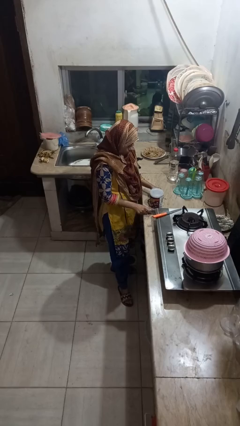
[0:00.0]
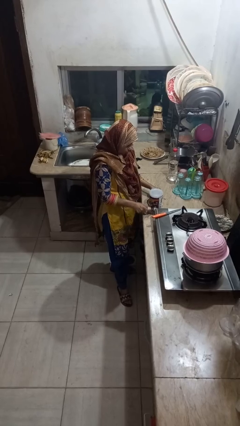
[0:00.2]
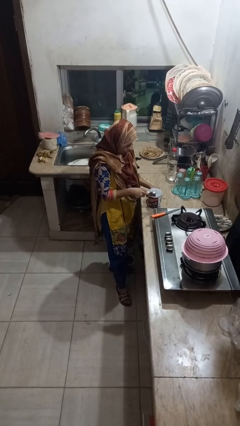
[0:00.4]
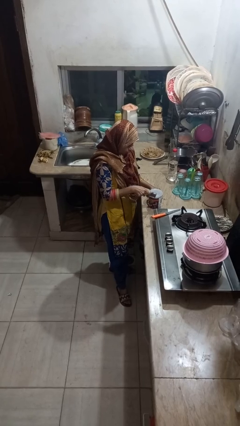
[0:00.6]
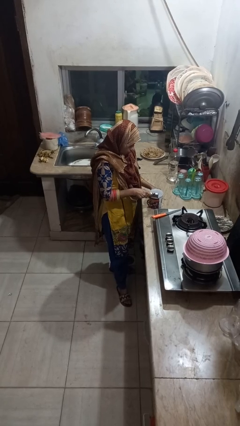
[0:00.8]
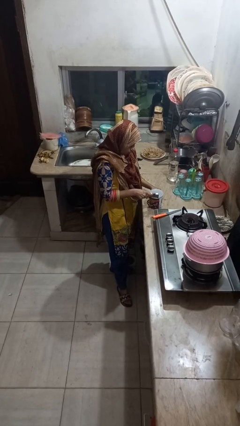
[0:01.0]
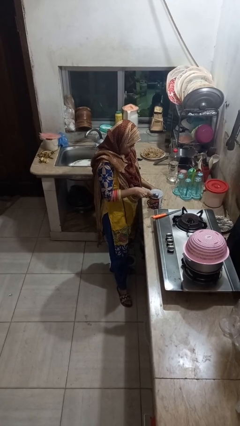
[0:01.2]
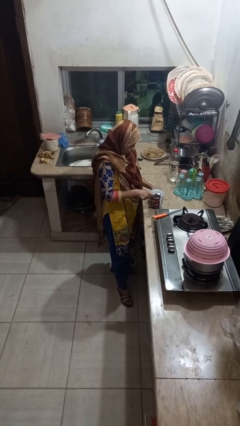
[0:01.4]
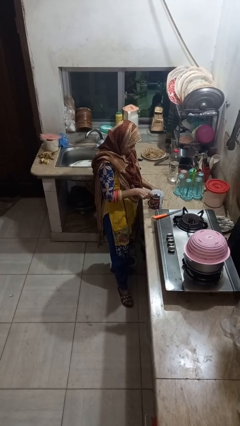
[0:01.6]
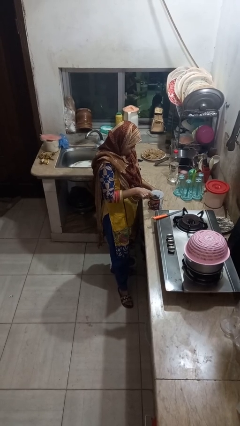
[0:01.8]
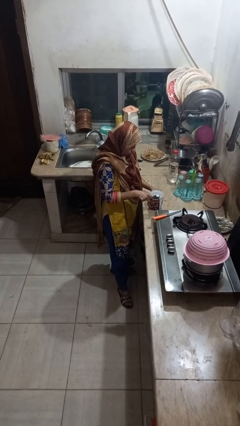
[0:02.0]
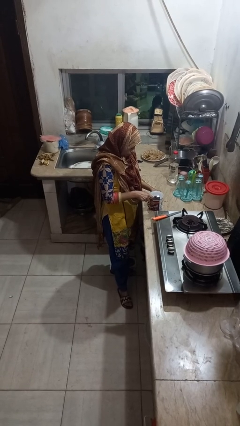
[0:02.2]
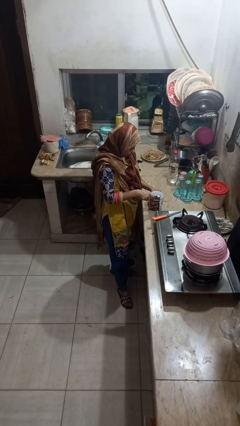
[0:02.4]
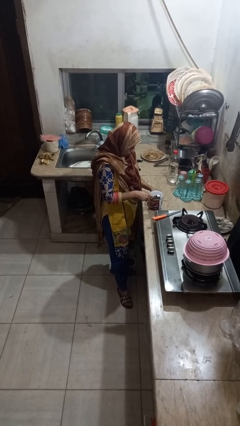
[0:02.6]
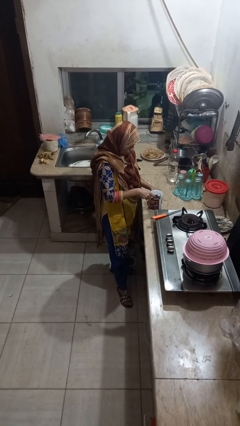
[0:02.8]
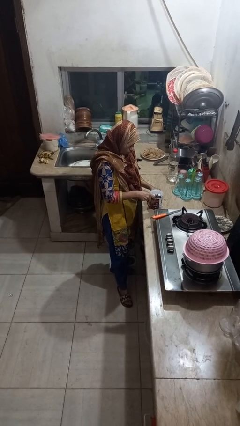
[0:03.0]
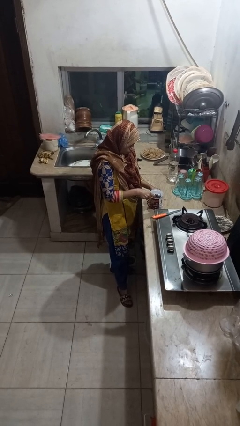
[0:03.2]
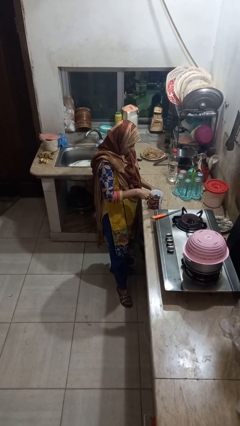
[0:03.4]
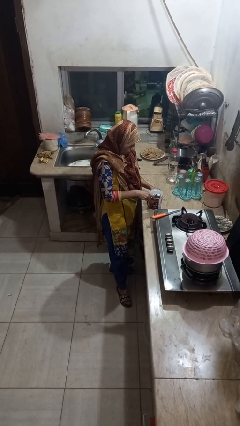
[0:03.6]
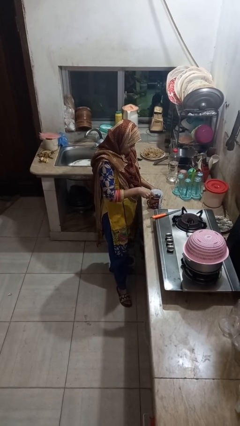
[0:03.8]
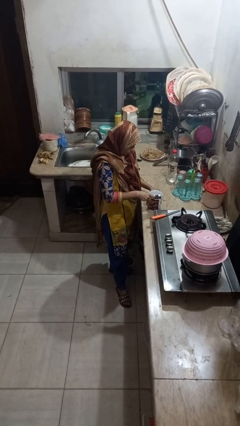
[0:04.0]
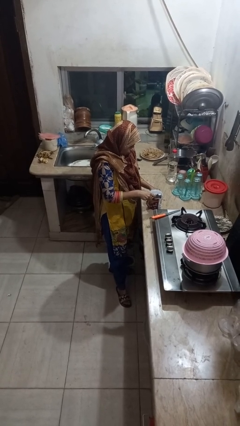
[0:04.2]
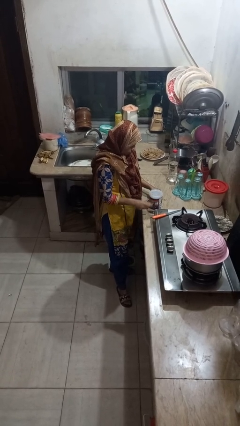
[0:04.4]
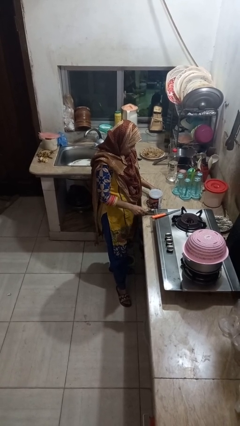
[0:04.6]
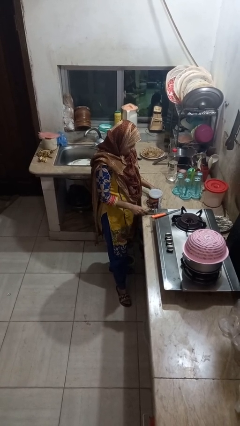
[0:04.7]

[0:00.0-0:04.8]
person opens can with can opener

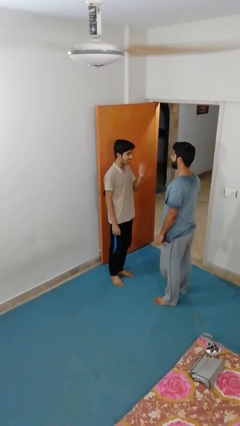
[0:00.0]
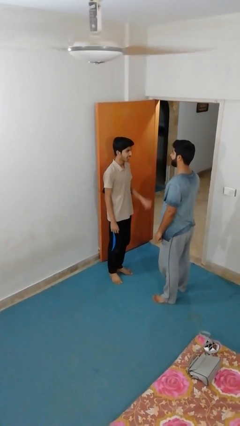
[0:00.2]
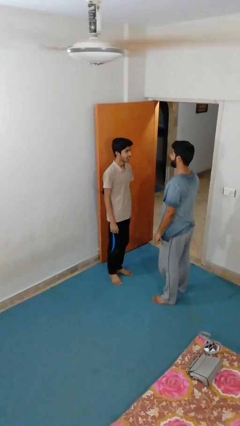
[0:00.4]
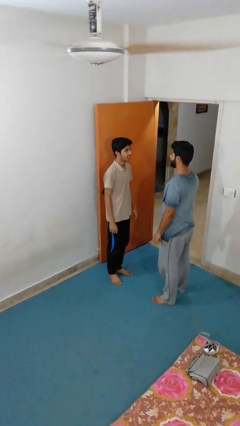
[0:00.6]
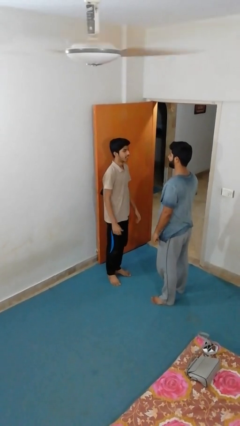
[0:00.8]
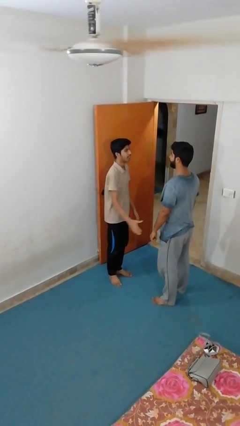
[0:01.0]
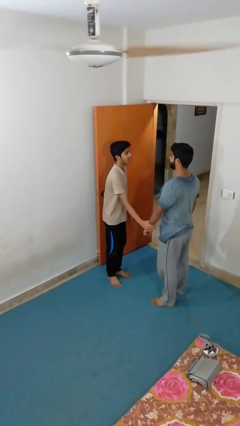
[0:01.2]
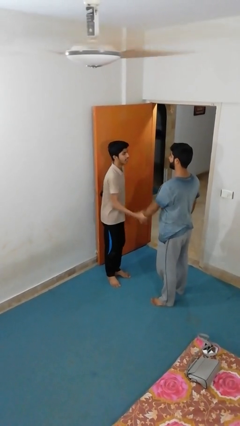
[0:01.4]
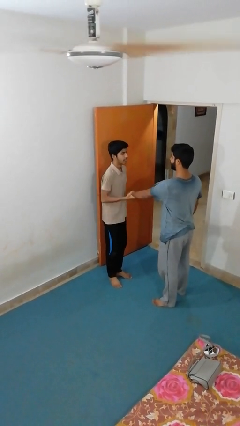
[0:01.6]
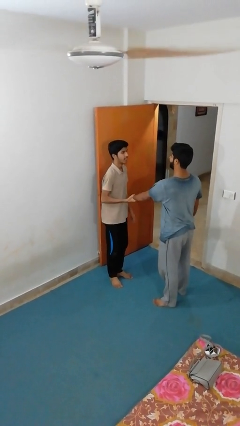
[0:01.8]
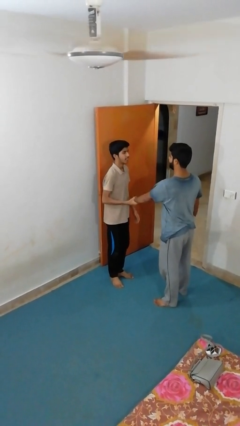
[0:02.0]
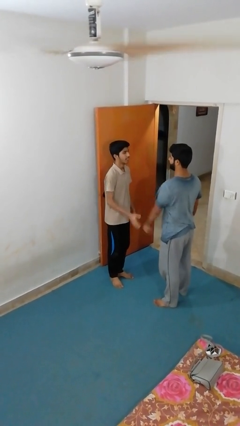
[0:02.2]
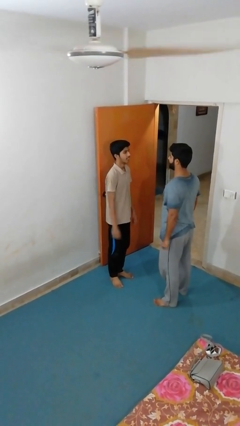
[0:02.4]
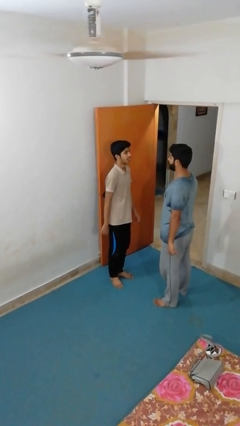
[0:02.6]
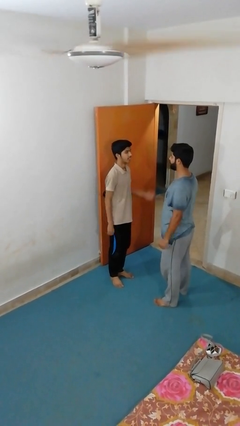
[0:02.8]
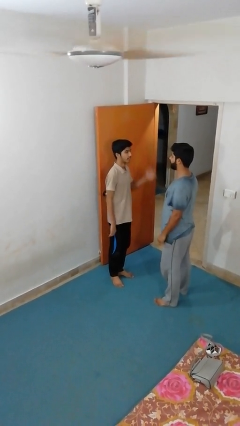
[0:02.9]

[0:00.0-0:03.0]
person grabs person by forearm

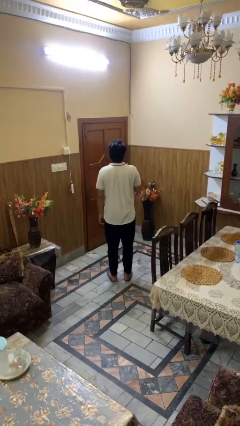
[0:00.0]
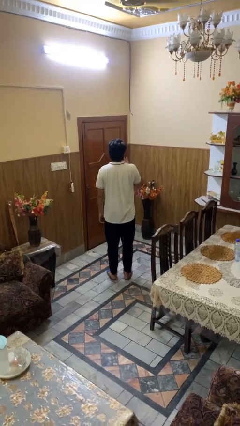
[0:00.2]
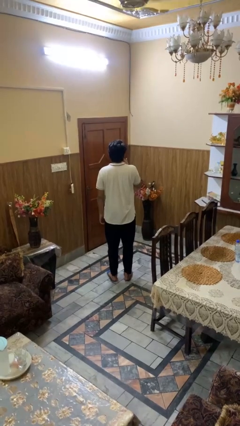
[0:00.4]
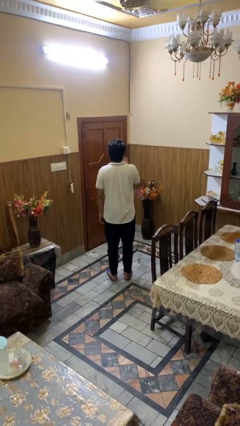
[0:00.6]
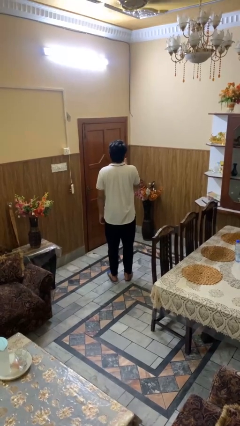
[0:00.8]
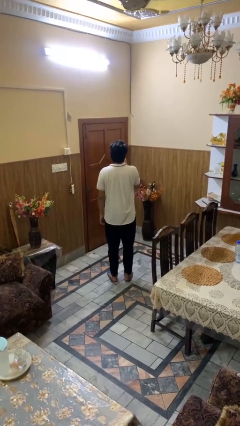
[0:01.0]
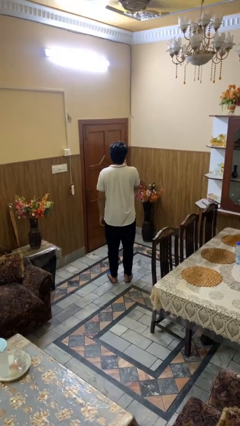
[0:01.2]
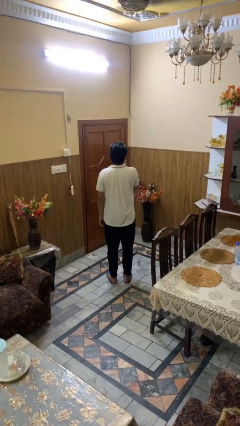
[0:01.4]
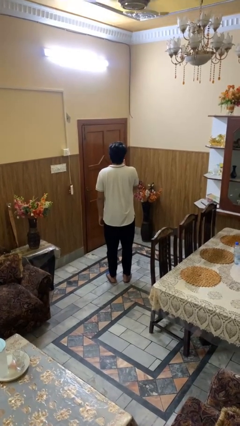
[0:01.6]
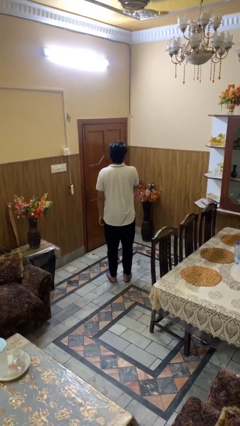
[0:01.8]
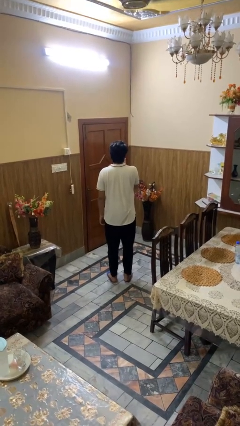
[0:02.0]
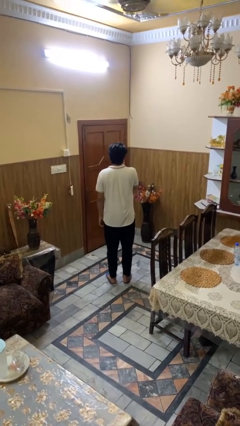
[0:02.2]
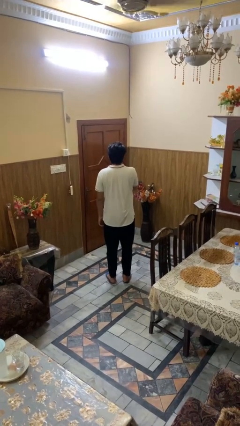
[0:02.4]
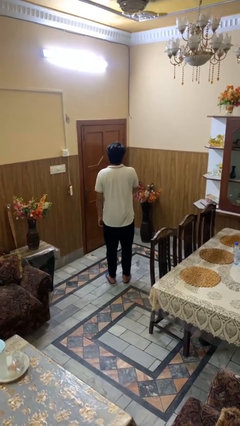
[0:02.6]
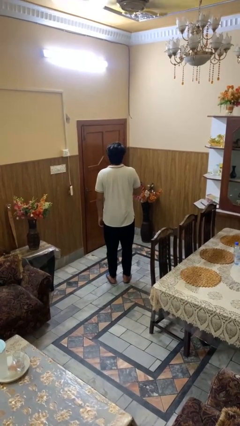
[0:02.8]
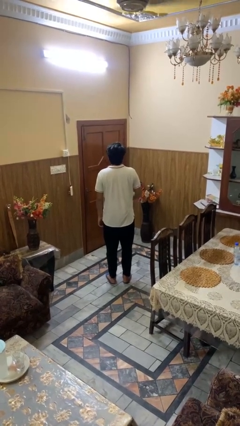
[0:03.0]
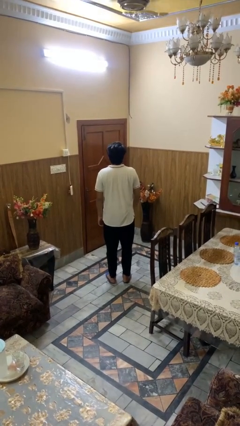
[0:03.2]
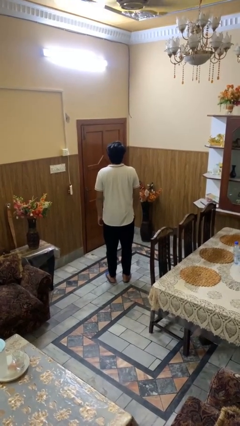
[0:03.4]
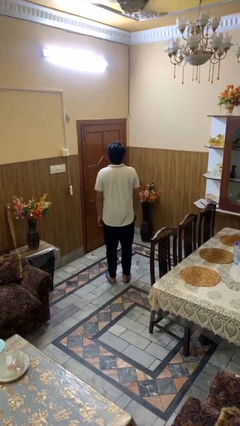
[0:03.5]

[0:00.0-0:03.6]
person licks fingers

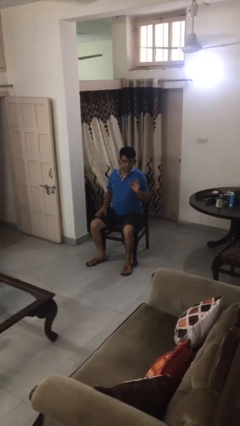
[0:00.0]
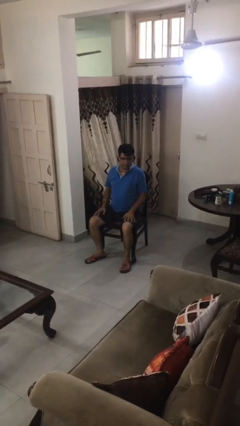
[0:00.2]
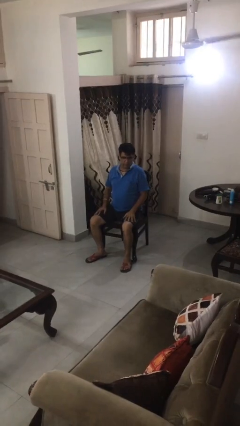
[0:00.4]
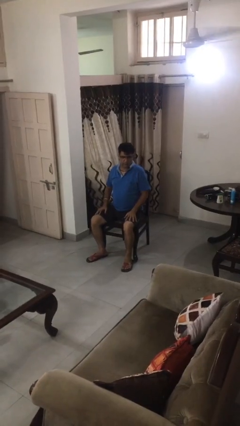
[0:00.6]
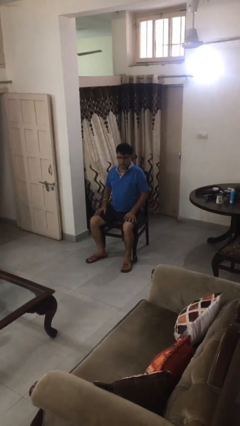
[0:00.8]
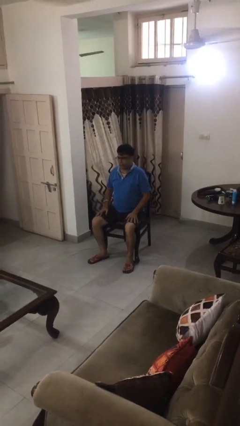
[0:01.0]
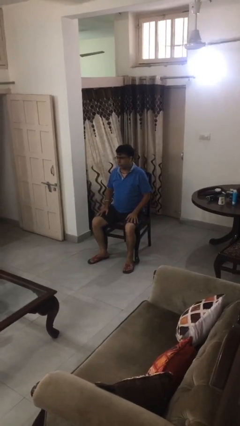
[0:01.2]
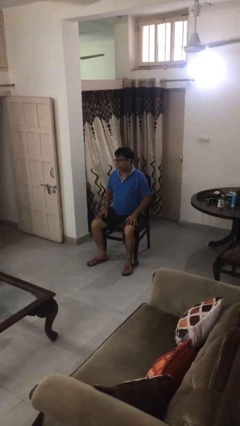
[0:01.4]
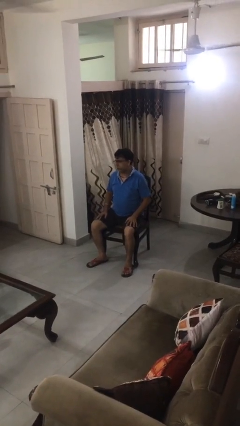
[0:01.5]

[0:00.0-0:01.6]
person slaps hands on thighs

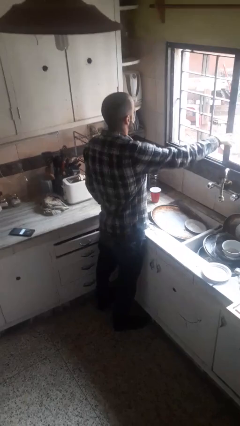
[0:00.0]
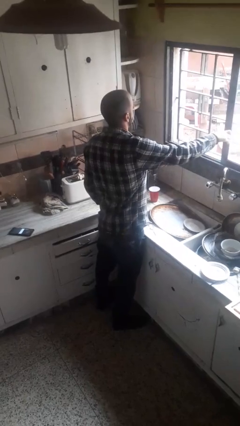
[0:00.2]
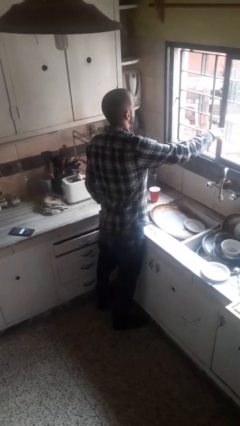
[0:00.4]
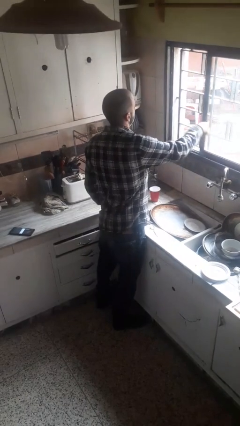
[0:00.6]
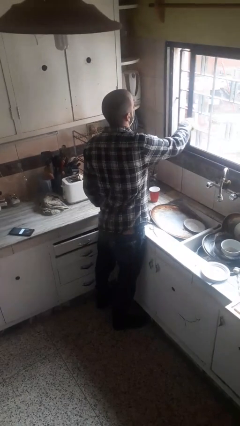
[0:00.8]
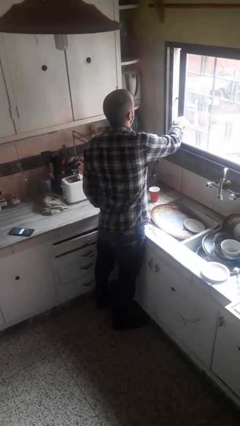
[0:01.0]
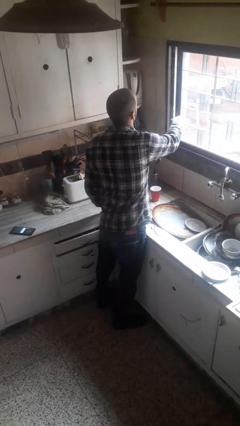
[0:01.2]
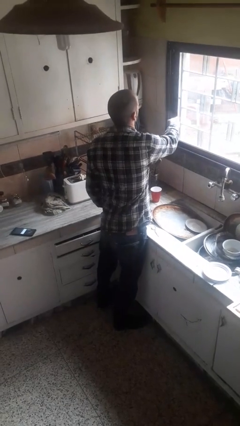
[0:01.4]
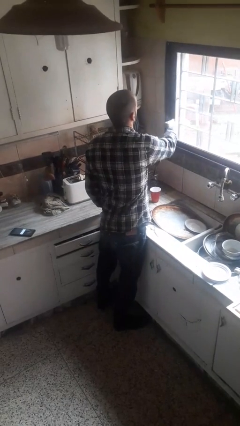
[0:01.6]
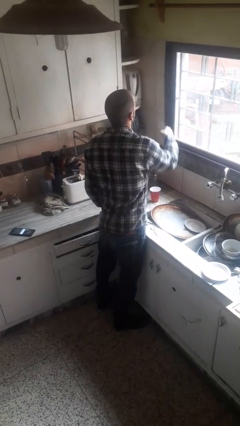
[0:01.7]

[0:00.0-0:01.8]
person closes home window

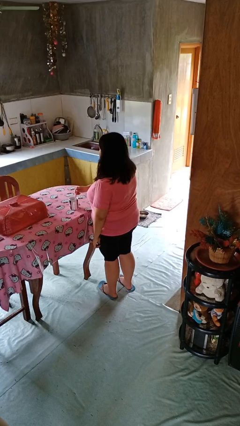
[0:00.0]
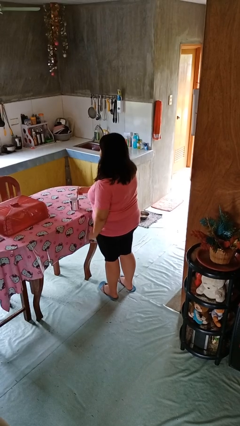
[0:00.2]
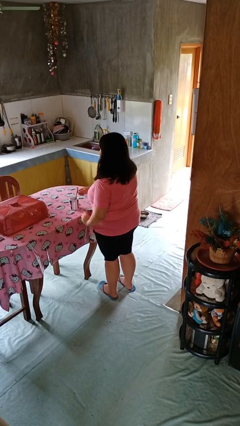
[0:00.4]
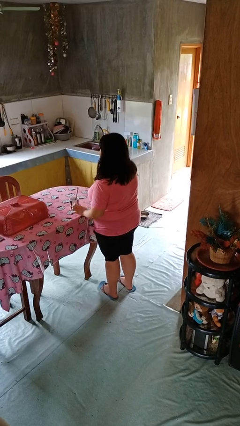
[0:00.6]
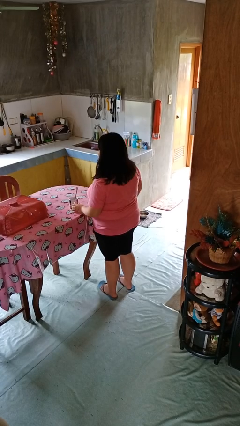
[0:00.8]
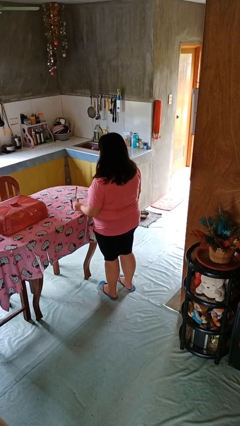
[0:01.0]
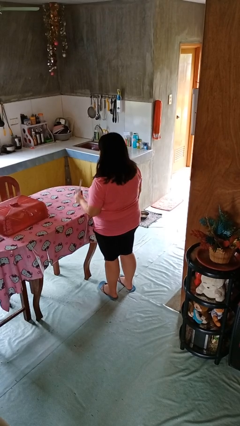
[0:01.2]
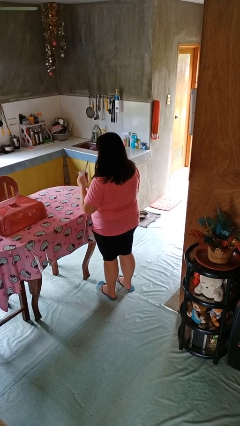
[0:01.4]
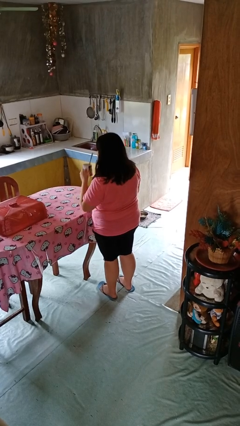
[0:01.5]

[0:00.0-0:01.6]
person stirs mug

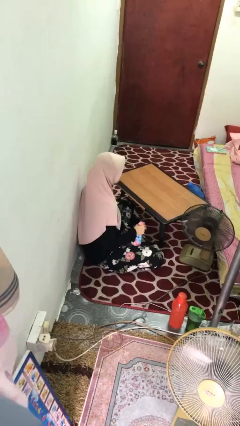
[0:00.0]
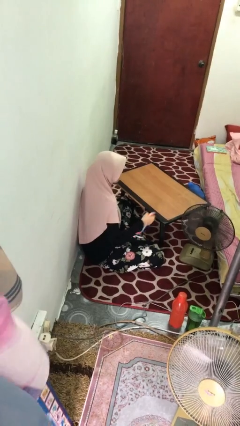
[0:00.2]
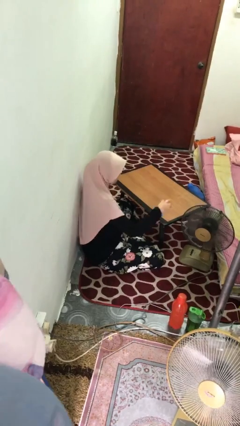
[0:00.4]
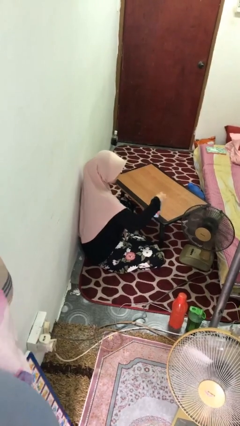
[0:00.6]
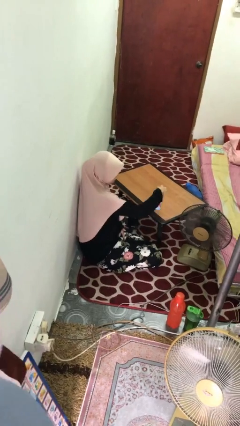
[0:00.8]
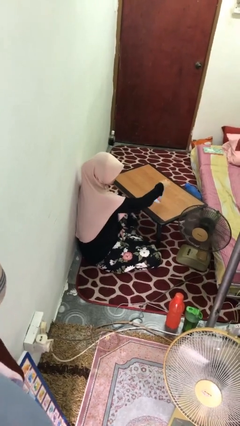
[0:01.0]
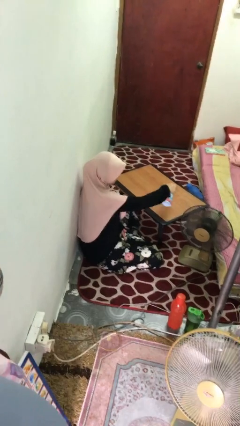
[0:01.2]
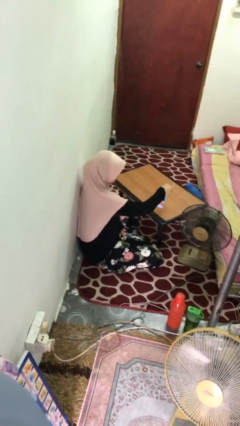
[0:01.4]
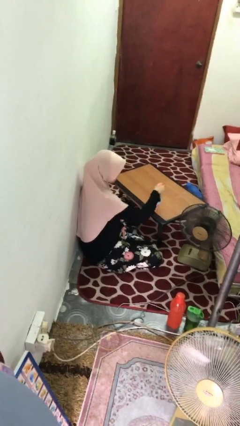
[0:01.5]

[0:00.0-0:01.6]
person sprays from bottle
